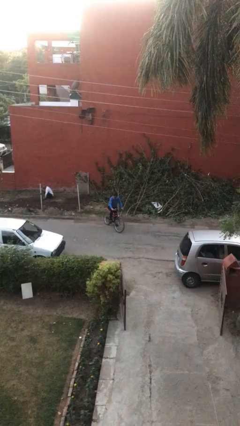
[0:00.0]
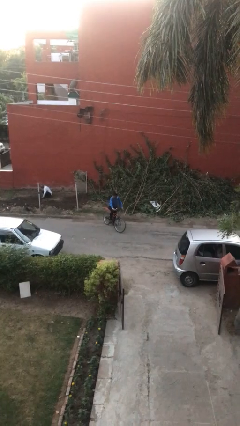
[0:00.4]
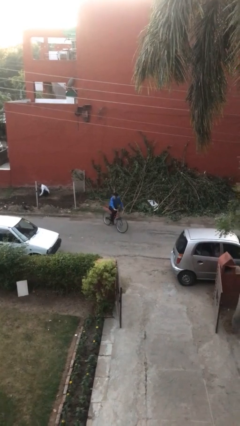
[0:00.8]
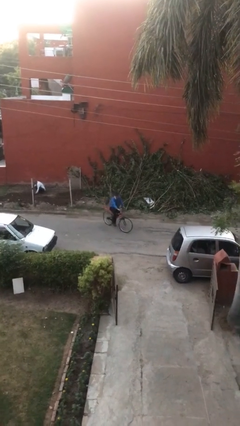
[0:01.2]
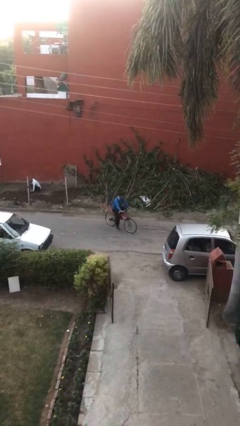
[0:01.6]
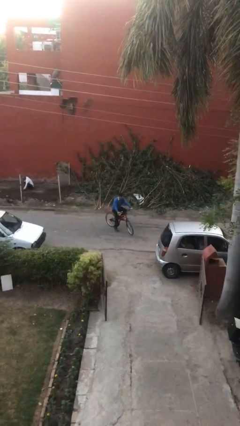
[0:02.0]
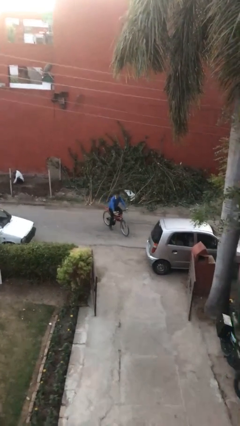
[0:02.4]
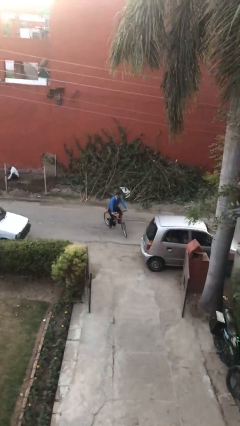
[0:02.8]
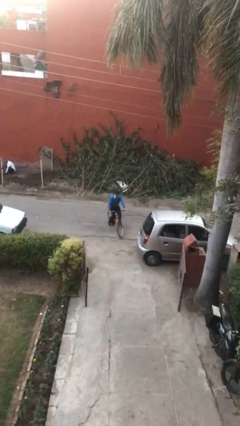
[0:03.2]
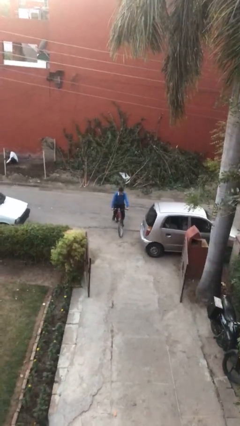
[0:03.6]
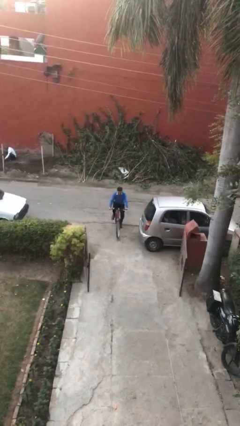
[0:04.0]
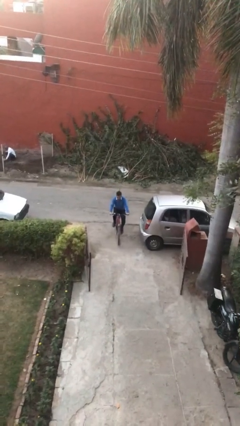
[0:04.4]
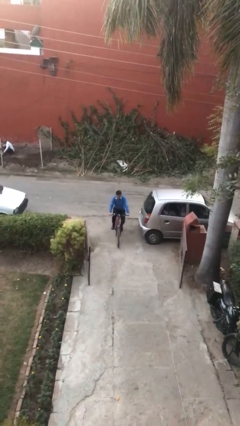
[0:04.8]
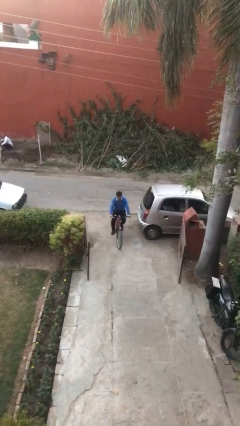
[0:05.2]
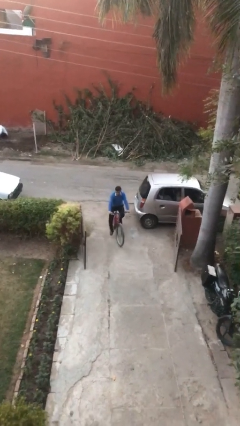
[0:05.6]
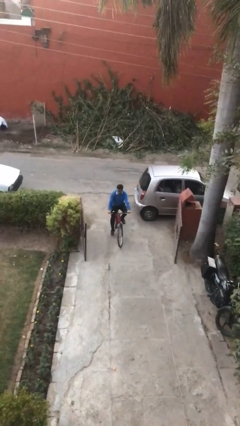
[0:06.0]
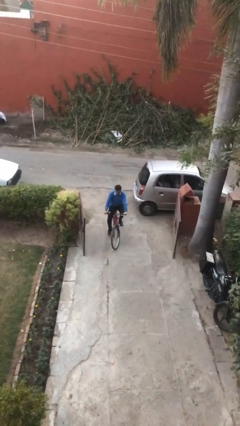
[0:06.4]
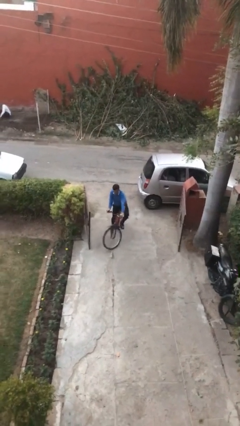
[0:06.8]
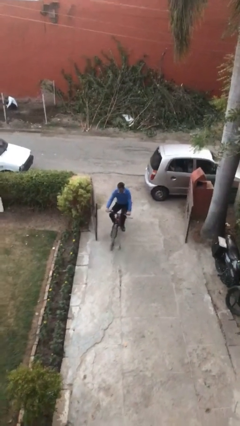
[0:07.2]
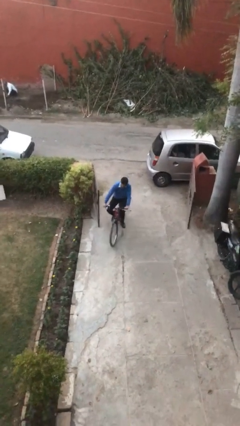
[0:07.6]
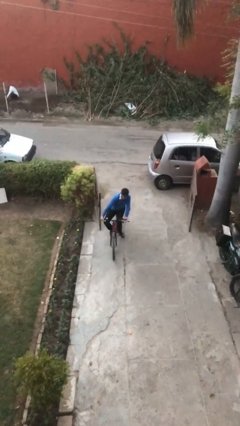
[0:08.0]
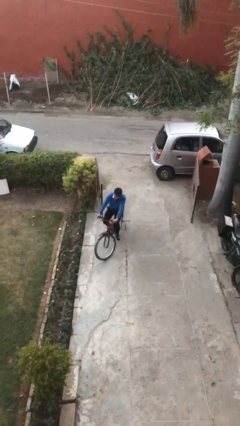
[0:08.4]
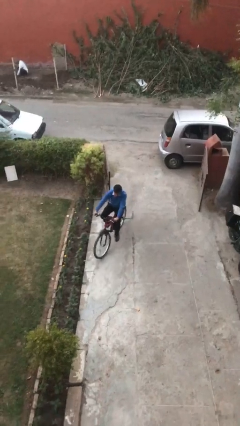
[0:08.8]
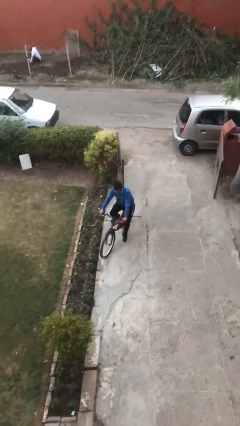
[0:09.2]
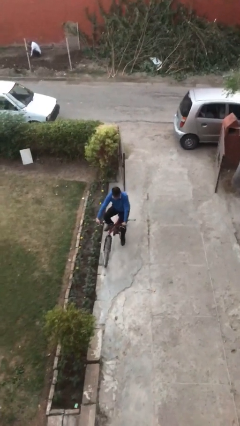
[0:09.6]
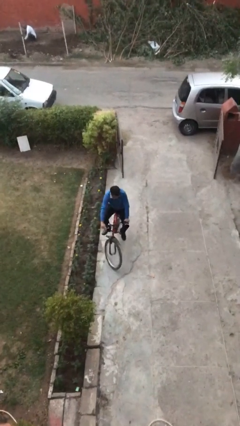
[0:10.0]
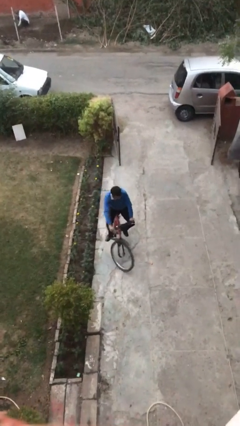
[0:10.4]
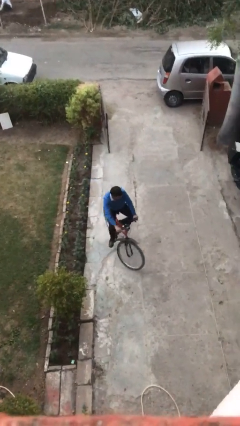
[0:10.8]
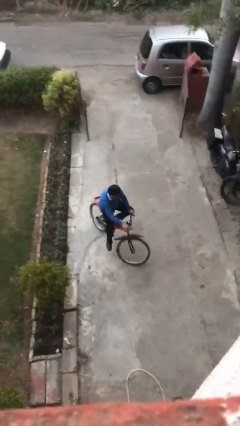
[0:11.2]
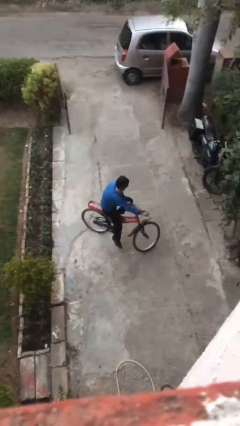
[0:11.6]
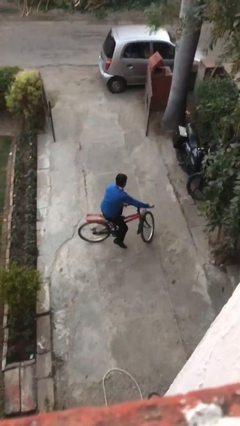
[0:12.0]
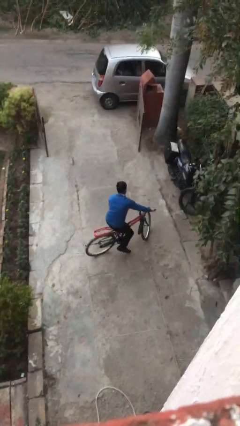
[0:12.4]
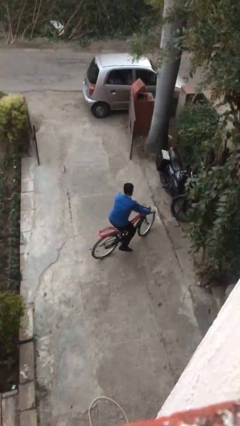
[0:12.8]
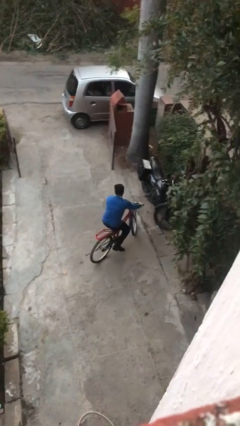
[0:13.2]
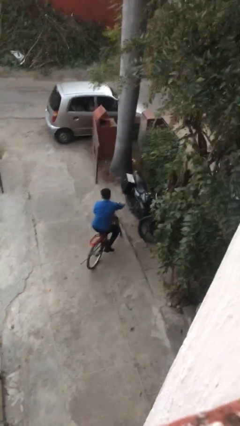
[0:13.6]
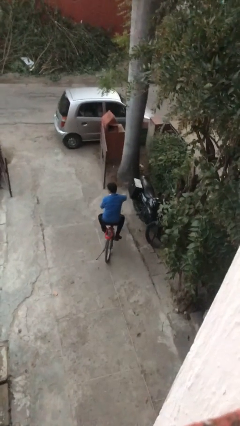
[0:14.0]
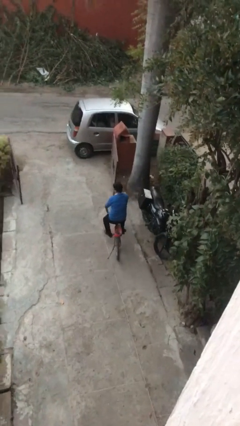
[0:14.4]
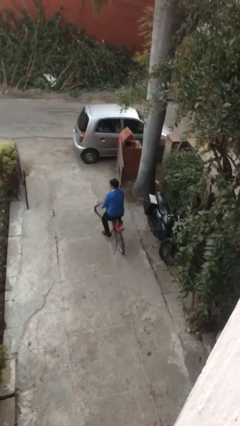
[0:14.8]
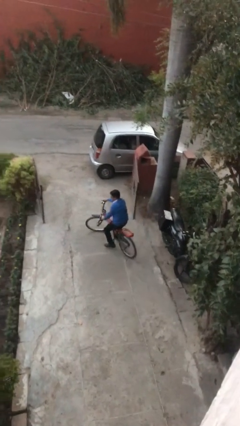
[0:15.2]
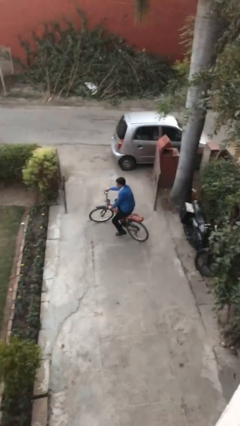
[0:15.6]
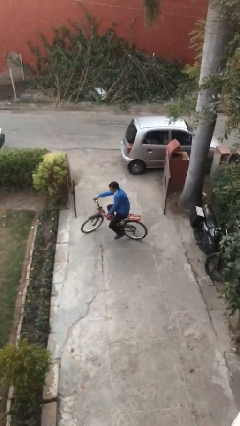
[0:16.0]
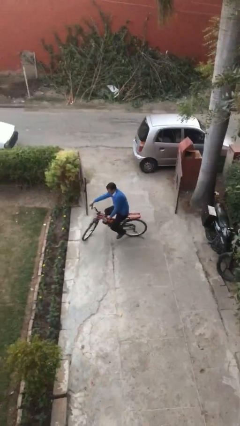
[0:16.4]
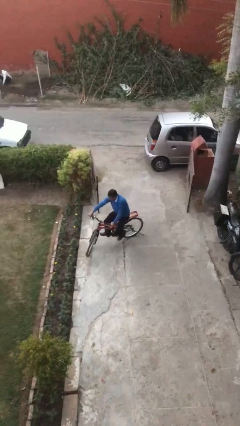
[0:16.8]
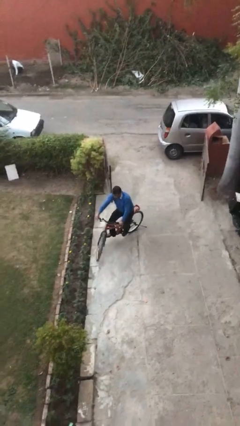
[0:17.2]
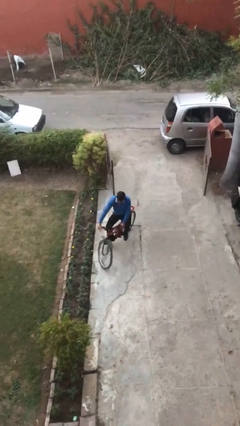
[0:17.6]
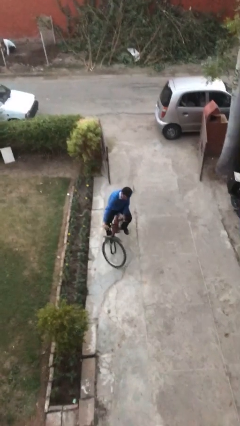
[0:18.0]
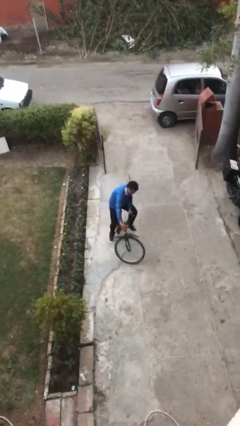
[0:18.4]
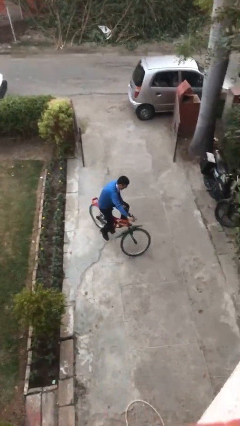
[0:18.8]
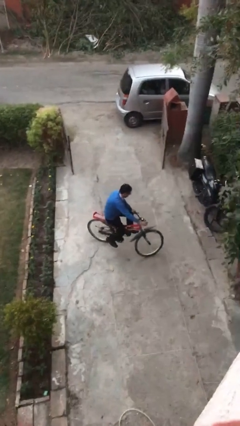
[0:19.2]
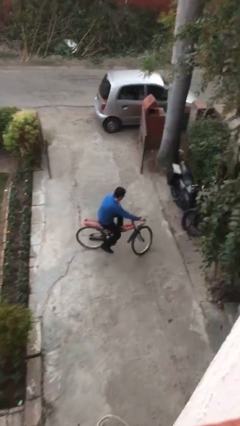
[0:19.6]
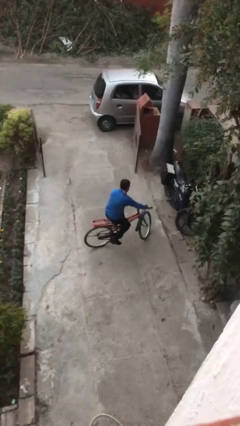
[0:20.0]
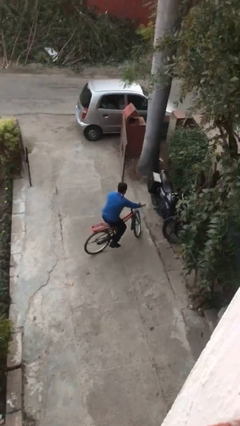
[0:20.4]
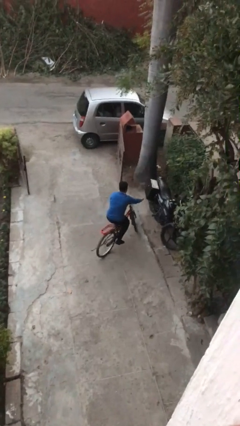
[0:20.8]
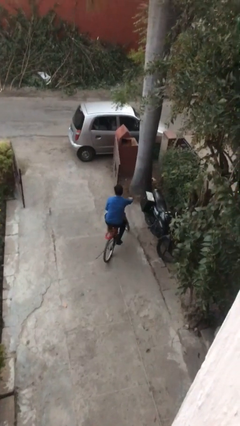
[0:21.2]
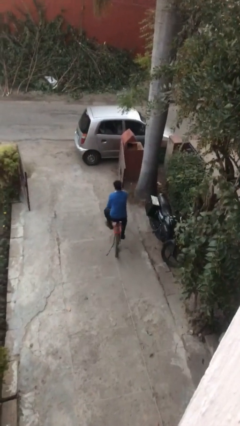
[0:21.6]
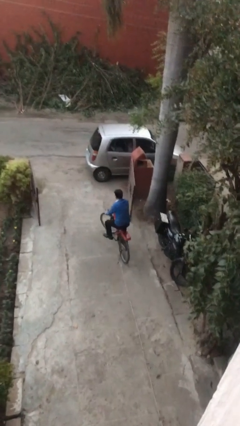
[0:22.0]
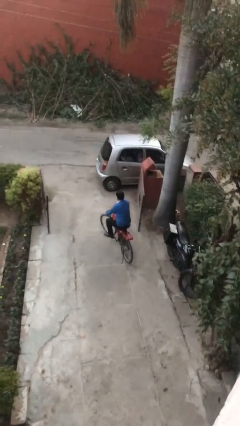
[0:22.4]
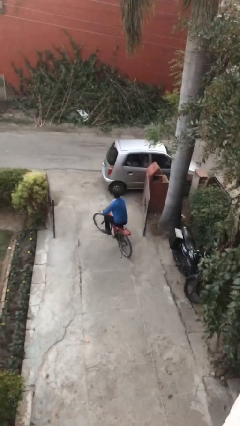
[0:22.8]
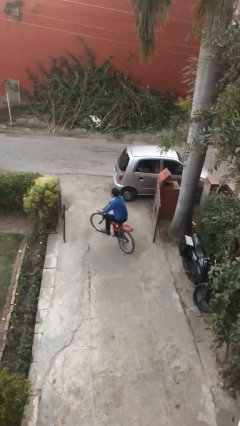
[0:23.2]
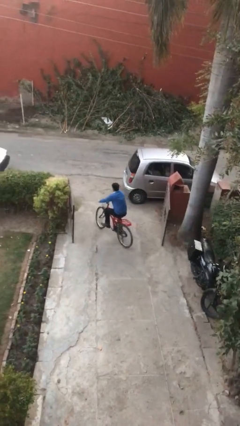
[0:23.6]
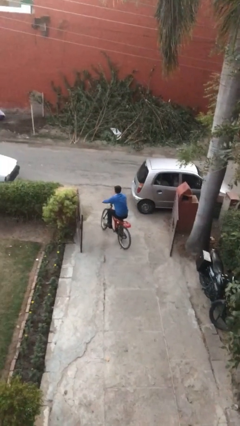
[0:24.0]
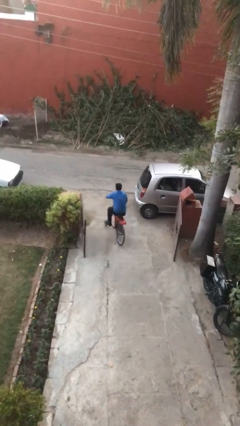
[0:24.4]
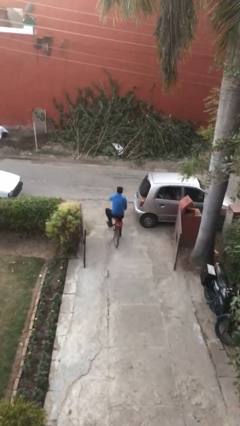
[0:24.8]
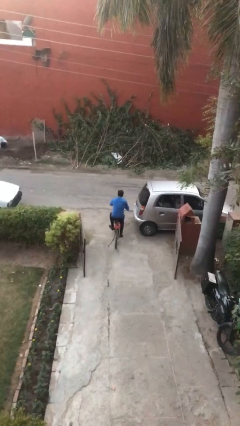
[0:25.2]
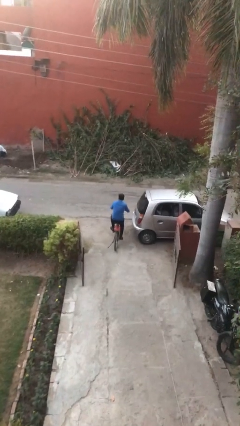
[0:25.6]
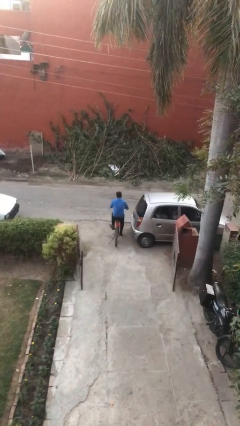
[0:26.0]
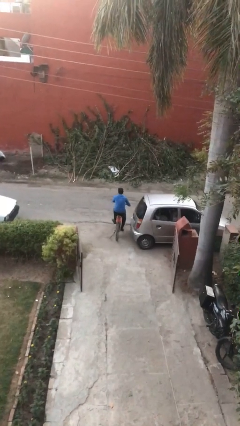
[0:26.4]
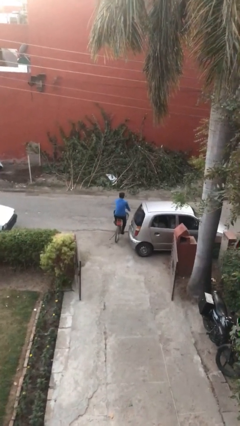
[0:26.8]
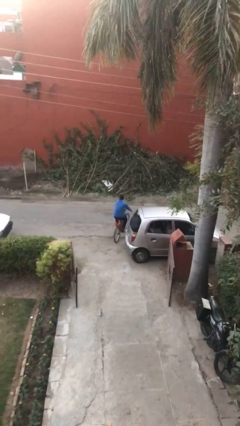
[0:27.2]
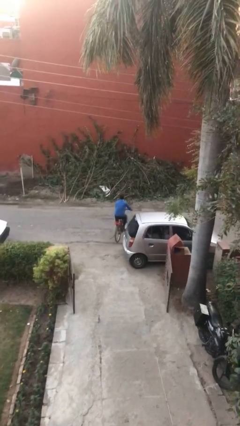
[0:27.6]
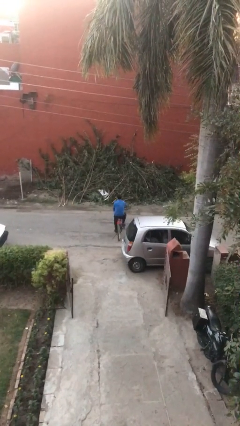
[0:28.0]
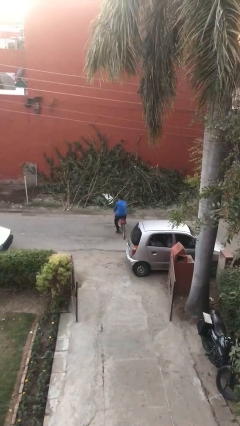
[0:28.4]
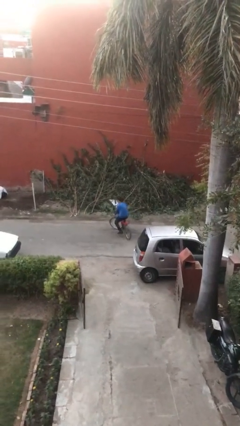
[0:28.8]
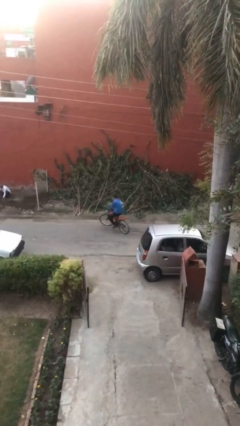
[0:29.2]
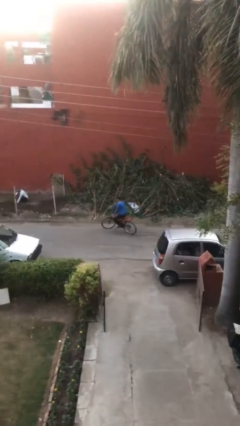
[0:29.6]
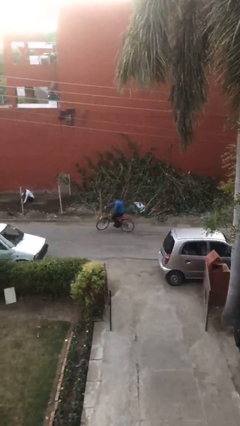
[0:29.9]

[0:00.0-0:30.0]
person rides bicycle

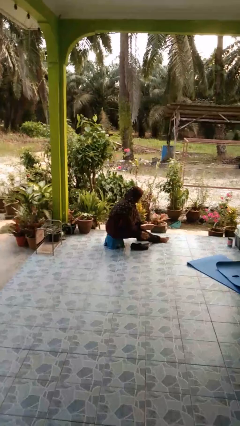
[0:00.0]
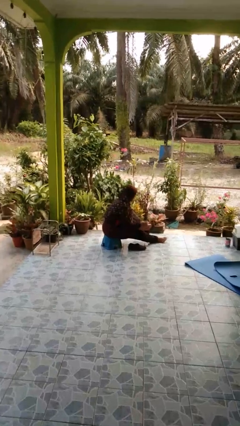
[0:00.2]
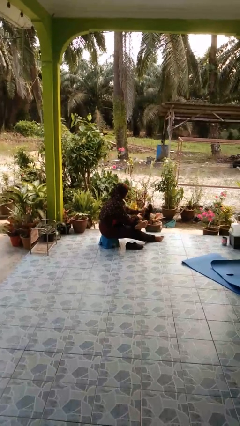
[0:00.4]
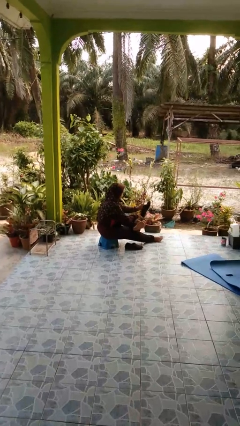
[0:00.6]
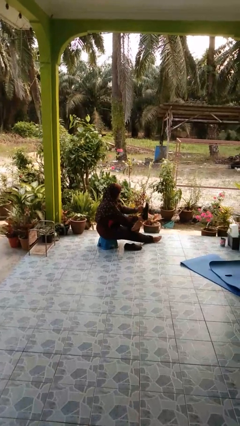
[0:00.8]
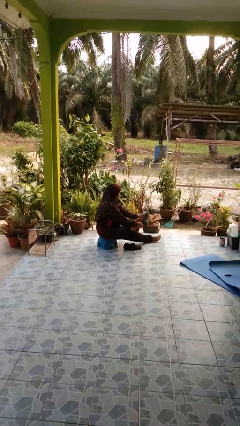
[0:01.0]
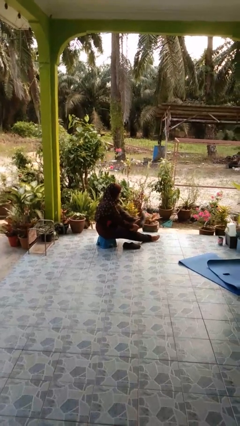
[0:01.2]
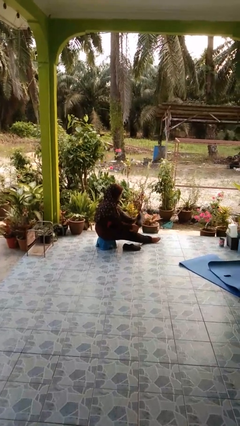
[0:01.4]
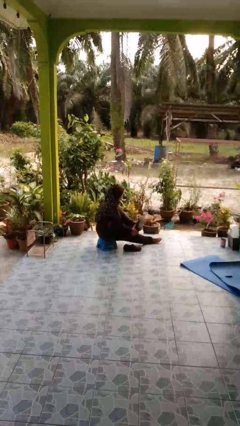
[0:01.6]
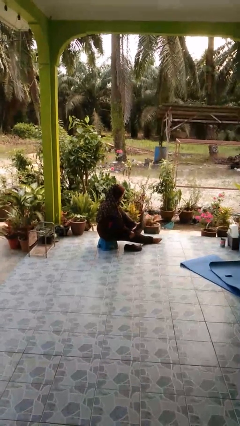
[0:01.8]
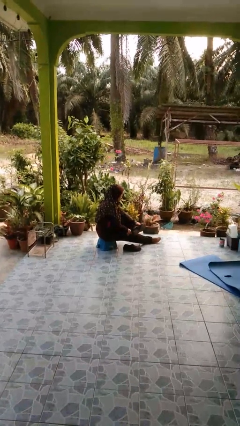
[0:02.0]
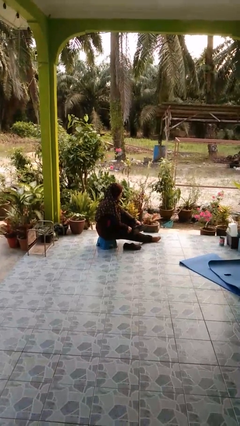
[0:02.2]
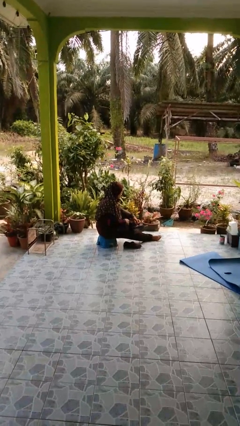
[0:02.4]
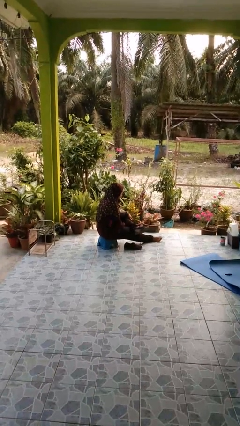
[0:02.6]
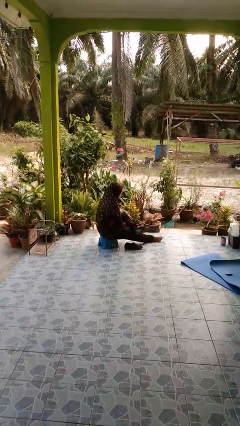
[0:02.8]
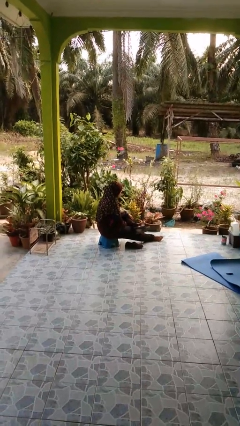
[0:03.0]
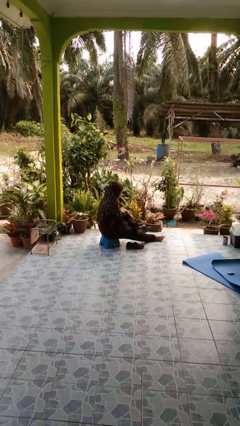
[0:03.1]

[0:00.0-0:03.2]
person puts on shoes
